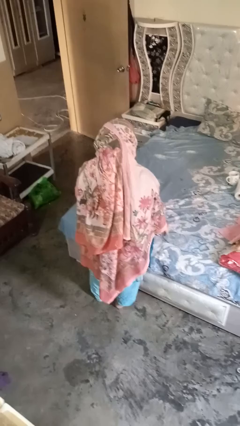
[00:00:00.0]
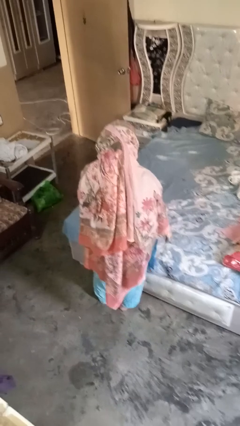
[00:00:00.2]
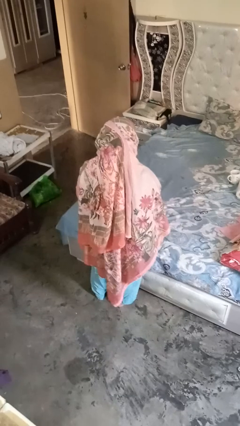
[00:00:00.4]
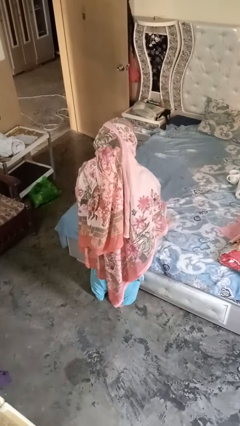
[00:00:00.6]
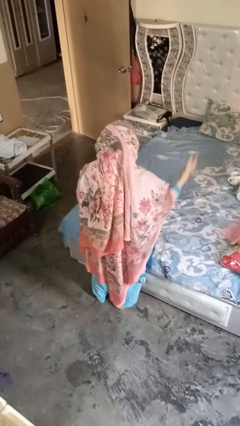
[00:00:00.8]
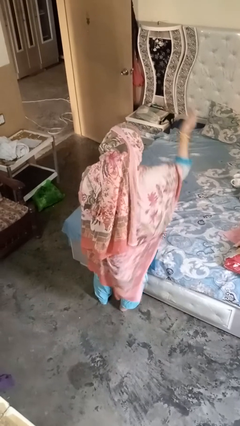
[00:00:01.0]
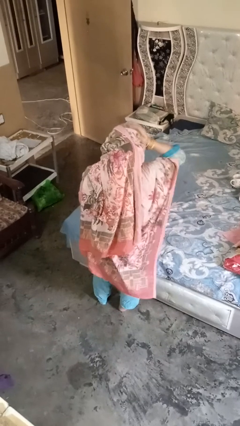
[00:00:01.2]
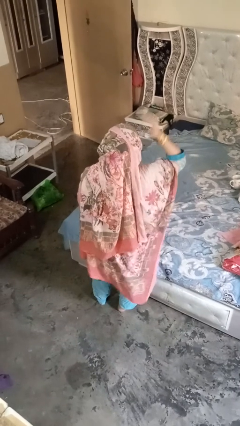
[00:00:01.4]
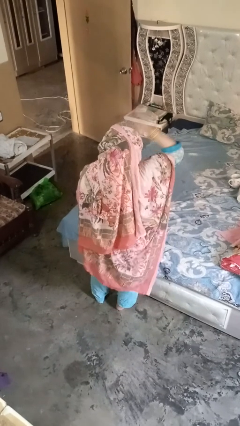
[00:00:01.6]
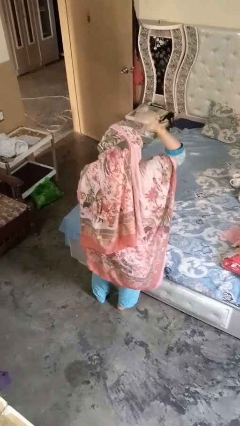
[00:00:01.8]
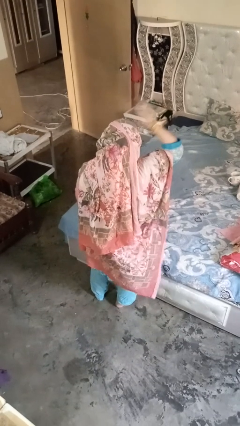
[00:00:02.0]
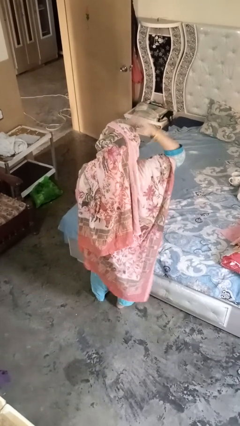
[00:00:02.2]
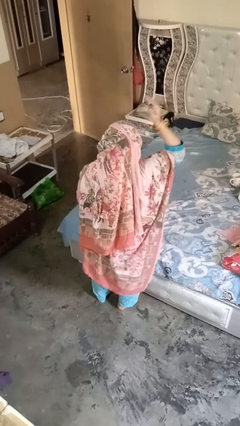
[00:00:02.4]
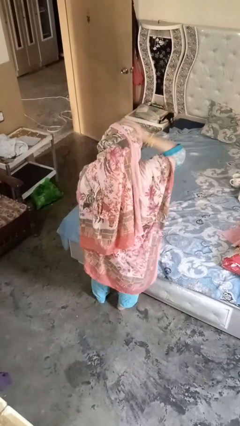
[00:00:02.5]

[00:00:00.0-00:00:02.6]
person pats head

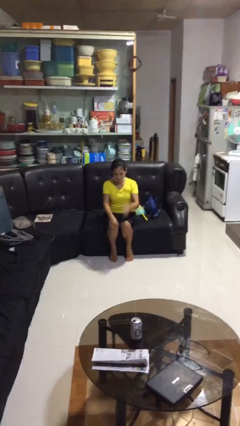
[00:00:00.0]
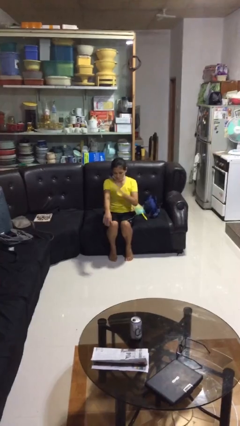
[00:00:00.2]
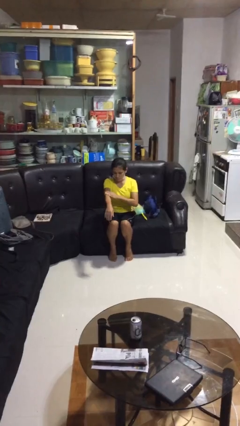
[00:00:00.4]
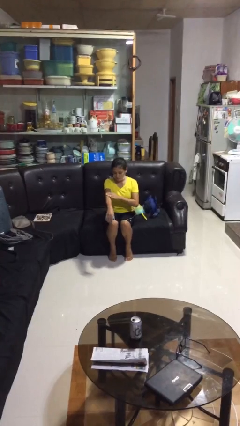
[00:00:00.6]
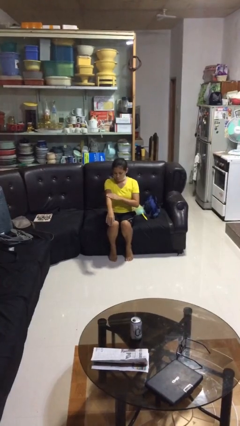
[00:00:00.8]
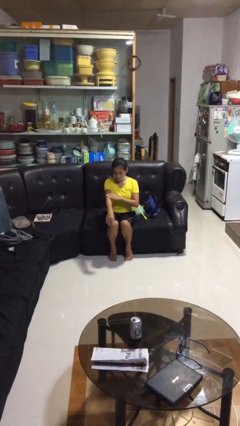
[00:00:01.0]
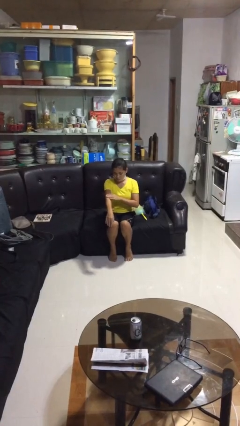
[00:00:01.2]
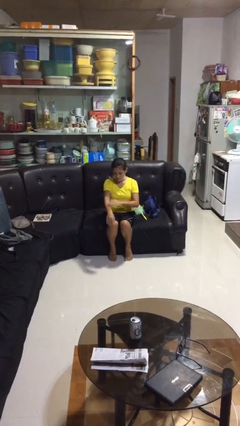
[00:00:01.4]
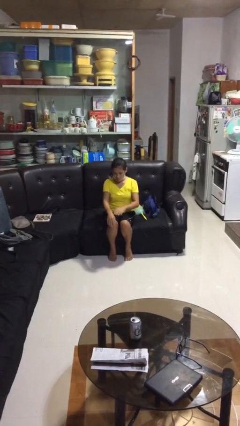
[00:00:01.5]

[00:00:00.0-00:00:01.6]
person swats bug

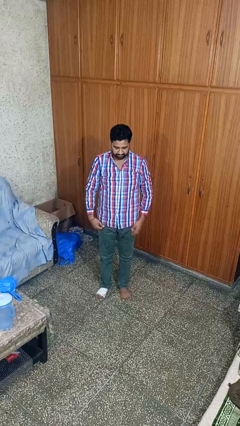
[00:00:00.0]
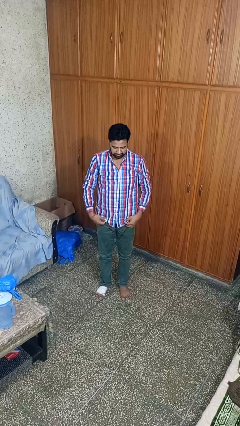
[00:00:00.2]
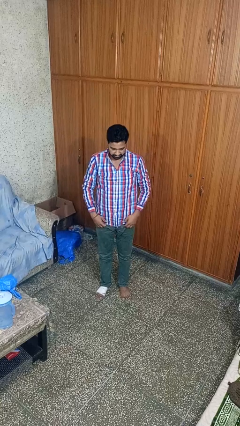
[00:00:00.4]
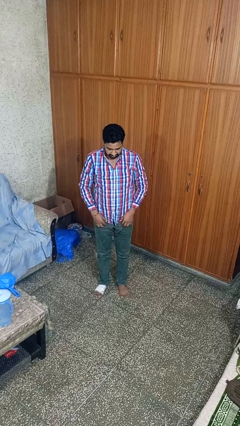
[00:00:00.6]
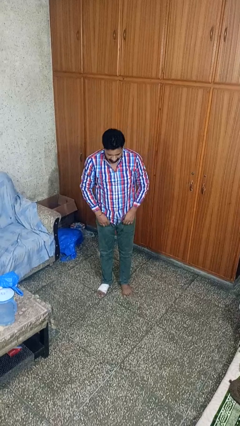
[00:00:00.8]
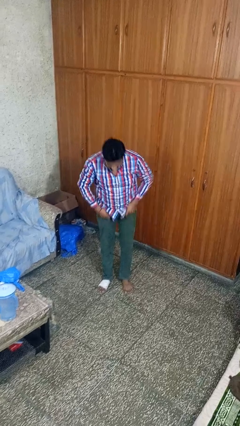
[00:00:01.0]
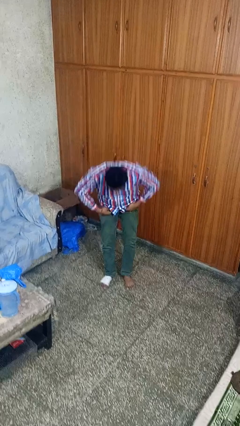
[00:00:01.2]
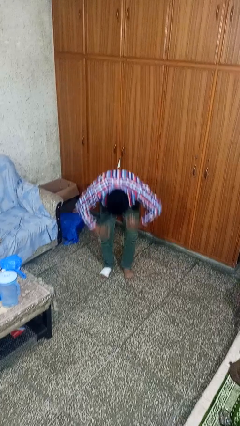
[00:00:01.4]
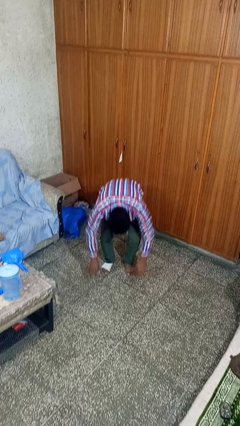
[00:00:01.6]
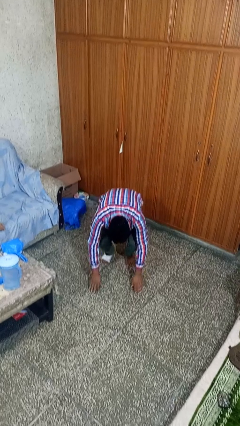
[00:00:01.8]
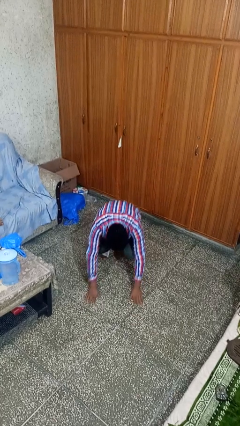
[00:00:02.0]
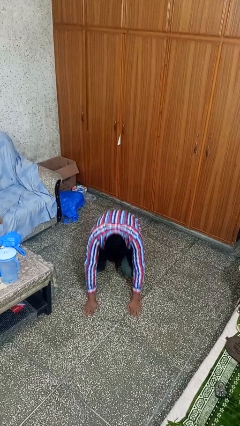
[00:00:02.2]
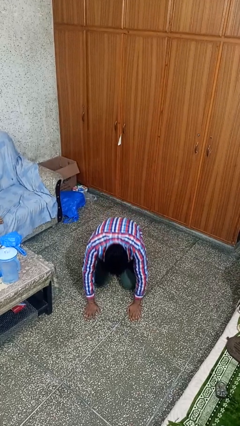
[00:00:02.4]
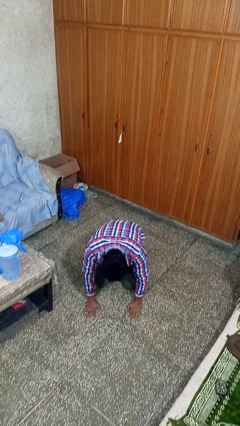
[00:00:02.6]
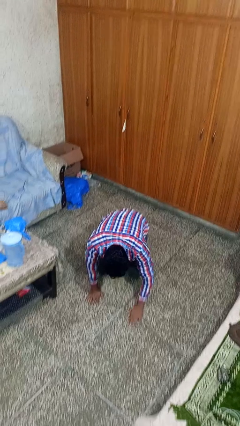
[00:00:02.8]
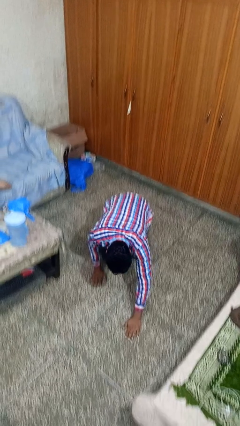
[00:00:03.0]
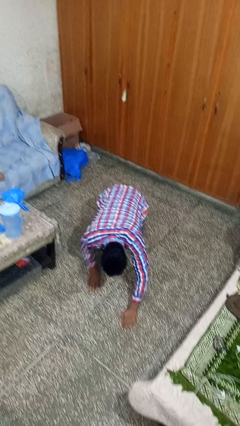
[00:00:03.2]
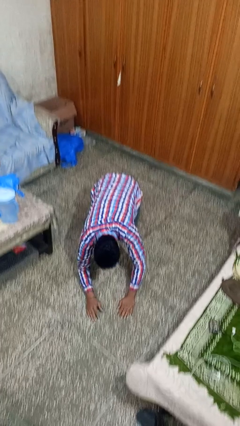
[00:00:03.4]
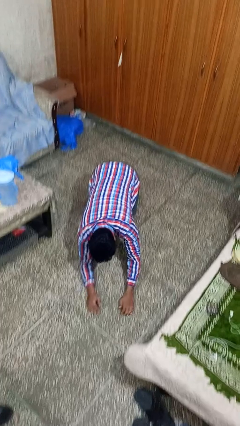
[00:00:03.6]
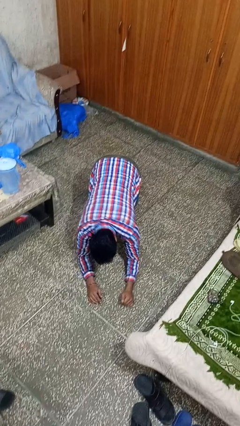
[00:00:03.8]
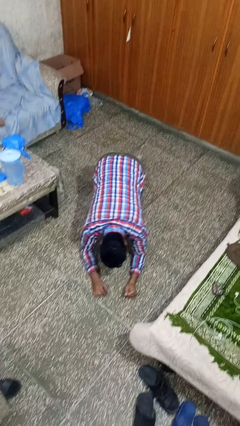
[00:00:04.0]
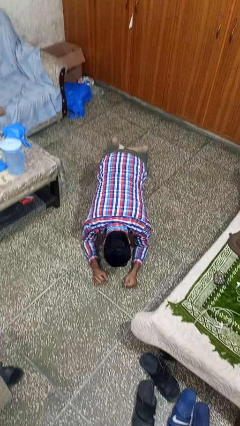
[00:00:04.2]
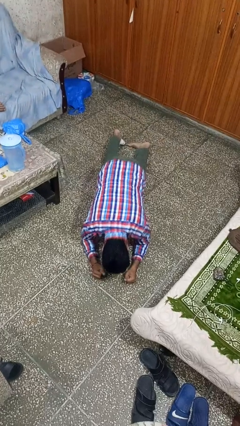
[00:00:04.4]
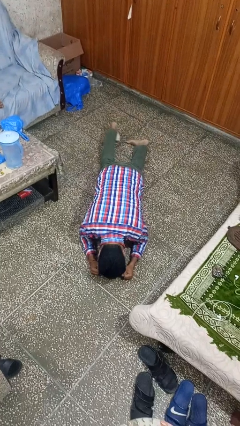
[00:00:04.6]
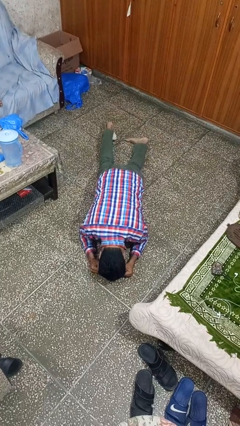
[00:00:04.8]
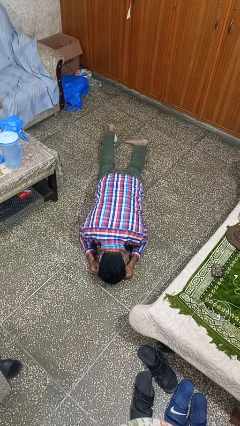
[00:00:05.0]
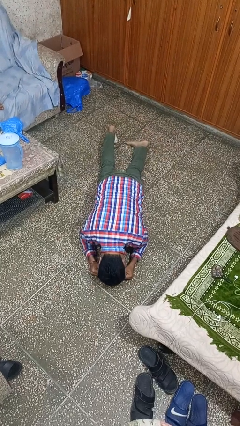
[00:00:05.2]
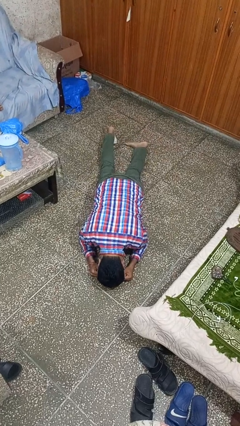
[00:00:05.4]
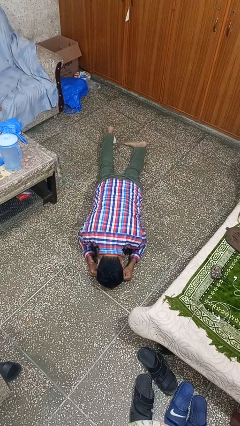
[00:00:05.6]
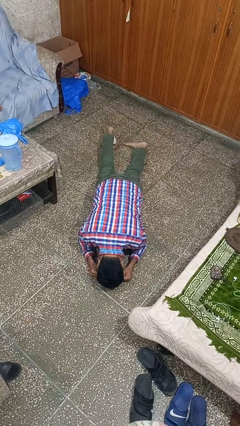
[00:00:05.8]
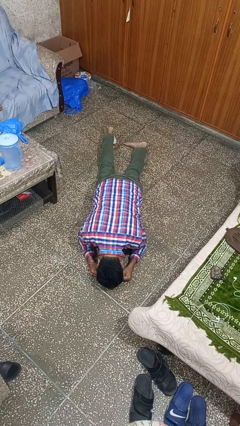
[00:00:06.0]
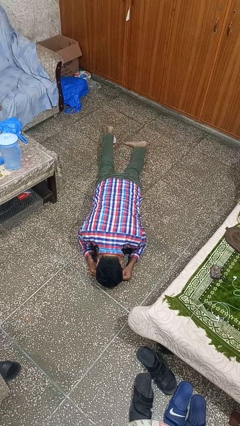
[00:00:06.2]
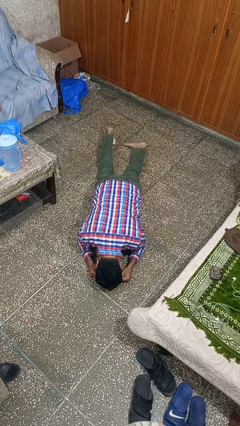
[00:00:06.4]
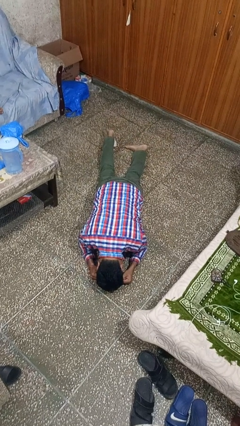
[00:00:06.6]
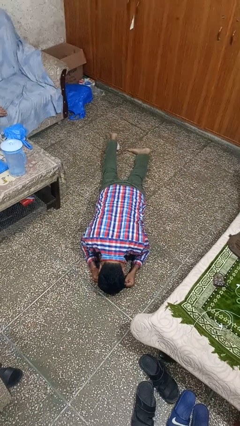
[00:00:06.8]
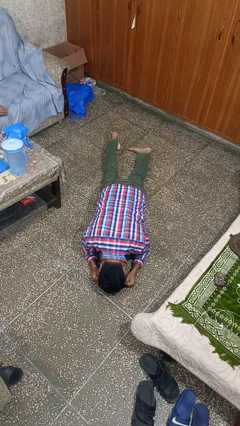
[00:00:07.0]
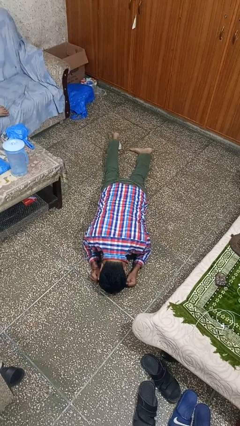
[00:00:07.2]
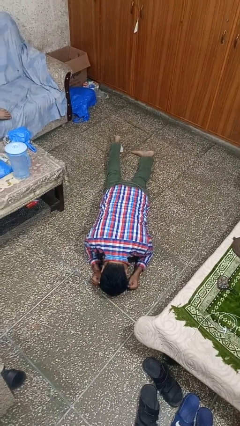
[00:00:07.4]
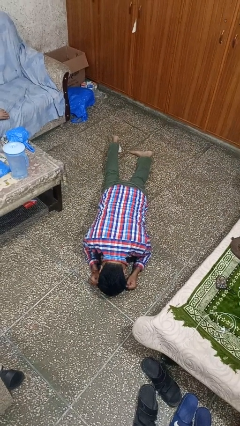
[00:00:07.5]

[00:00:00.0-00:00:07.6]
person exercises with plank

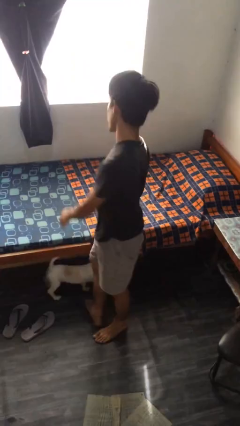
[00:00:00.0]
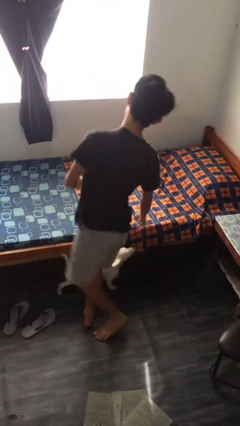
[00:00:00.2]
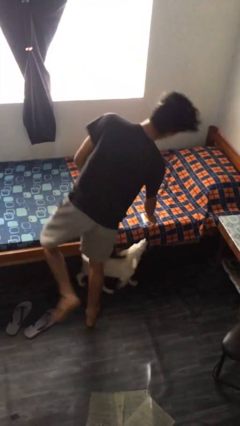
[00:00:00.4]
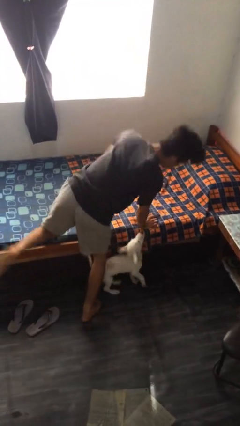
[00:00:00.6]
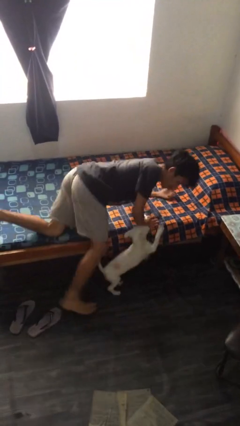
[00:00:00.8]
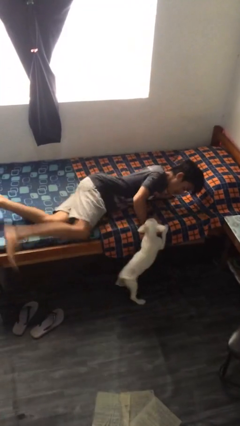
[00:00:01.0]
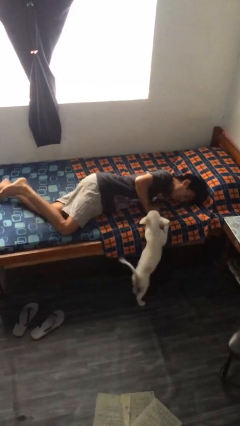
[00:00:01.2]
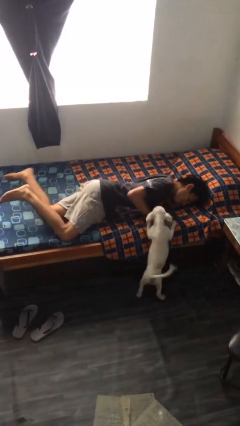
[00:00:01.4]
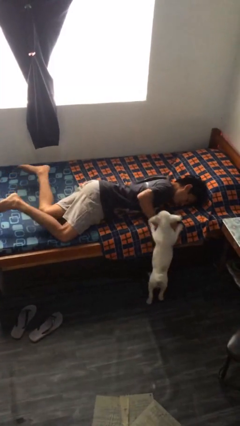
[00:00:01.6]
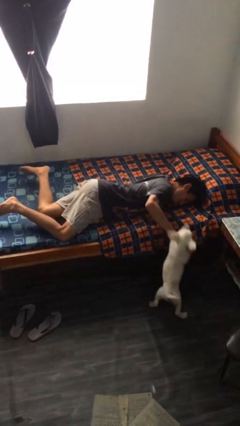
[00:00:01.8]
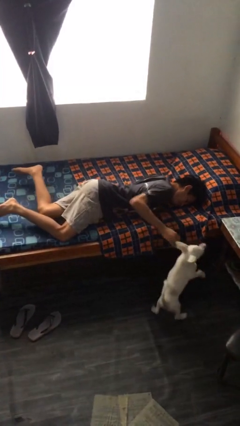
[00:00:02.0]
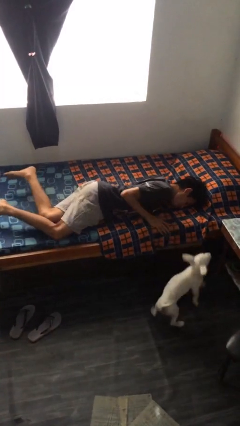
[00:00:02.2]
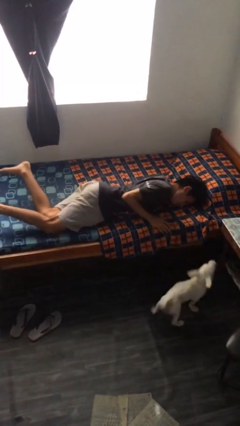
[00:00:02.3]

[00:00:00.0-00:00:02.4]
person lies down on bed

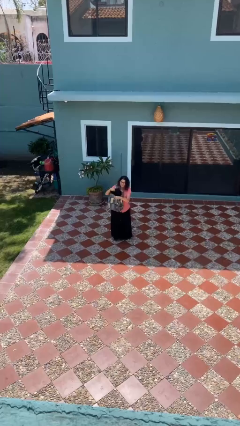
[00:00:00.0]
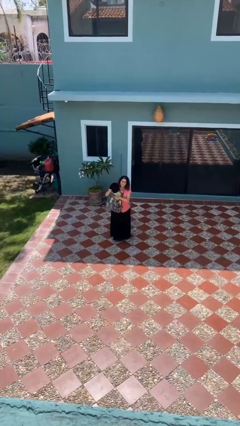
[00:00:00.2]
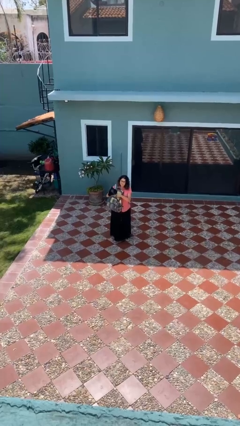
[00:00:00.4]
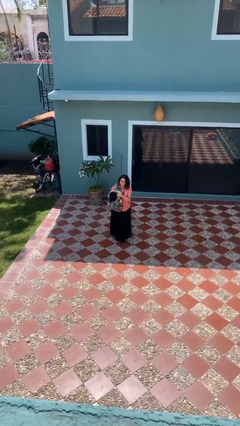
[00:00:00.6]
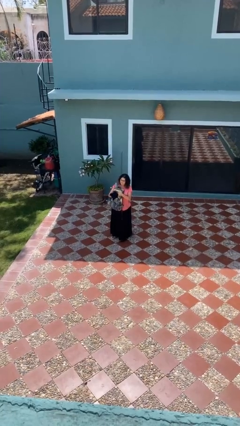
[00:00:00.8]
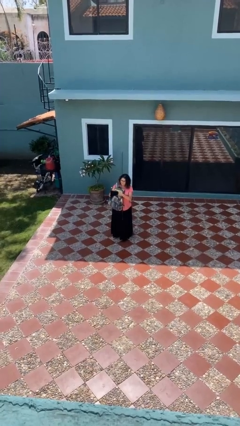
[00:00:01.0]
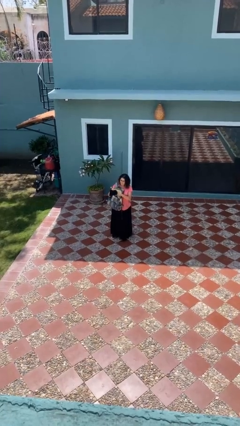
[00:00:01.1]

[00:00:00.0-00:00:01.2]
person takes object from backpack

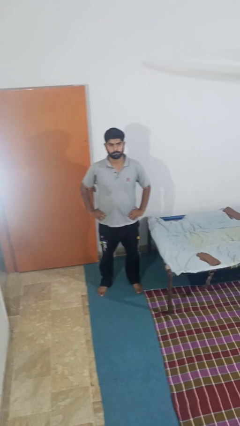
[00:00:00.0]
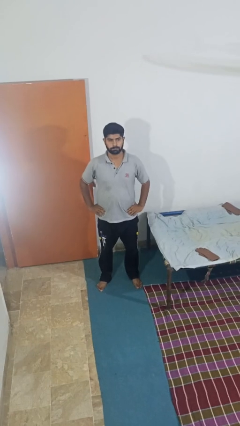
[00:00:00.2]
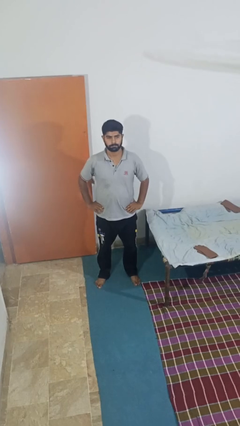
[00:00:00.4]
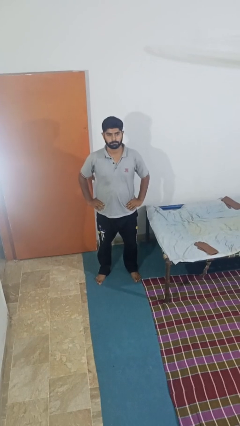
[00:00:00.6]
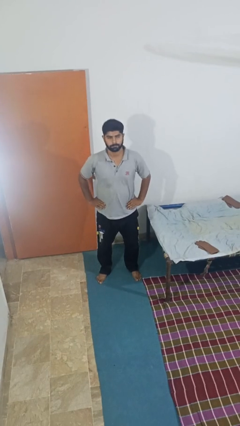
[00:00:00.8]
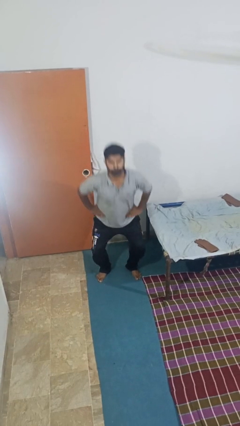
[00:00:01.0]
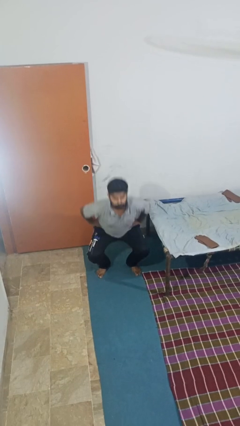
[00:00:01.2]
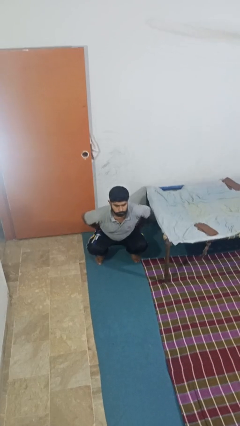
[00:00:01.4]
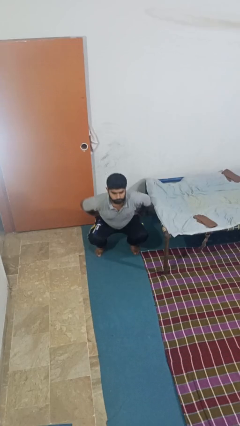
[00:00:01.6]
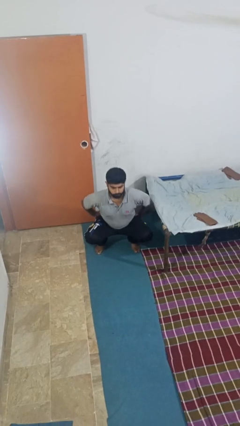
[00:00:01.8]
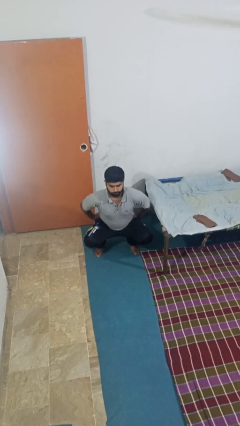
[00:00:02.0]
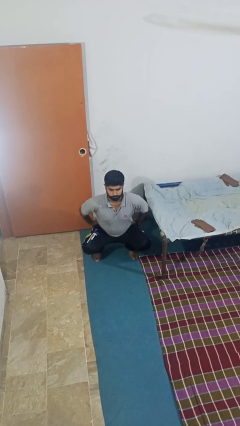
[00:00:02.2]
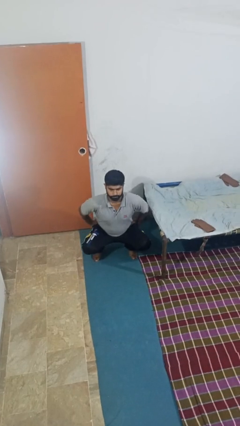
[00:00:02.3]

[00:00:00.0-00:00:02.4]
person squats
